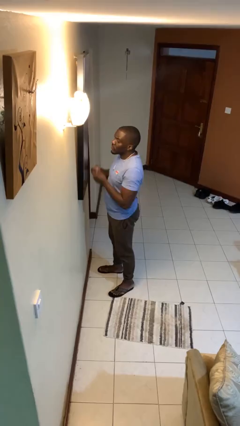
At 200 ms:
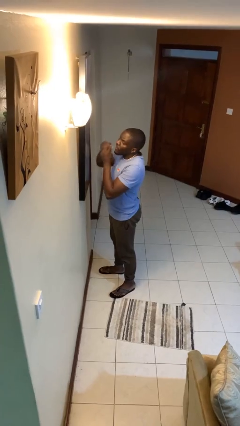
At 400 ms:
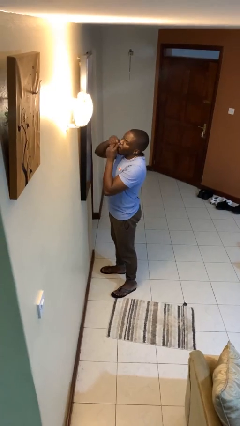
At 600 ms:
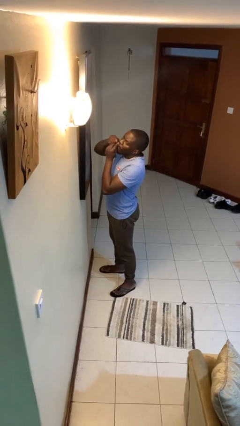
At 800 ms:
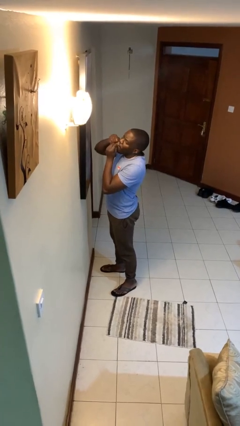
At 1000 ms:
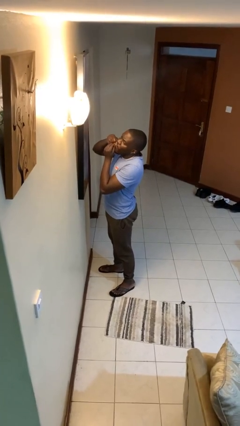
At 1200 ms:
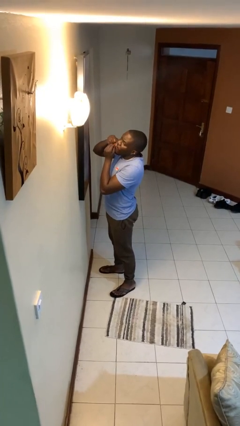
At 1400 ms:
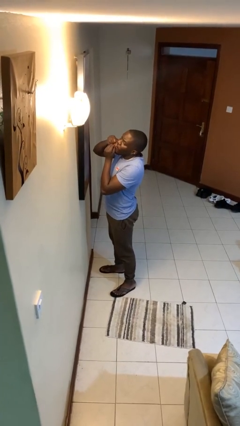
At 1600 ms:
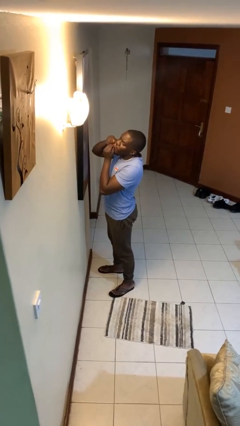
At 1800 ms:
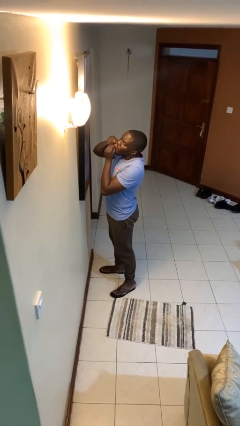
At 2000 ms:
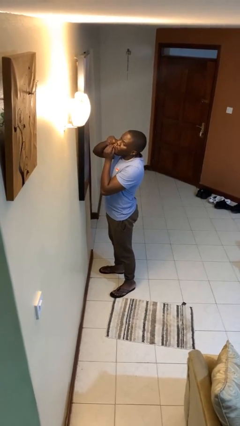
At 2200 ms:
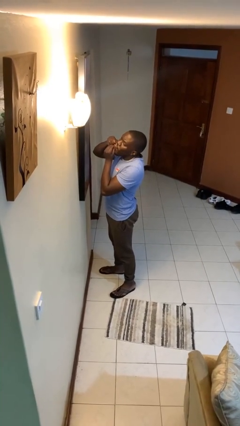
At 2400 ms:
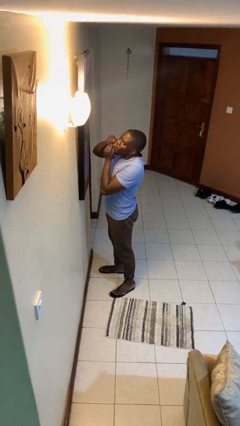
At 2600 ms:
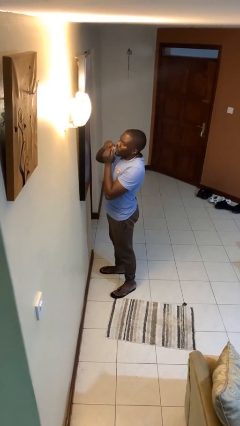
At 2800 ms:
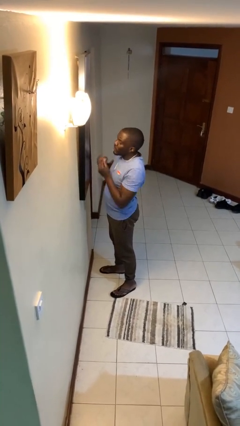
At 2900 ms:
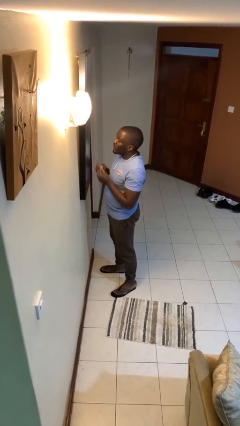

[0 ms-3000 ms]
person flosses

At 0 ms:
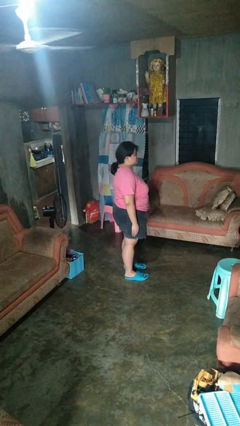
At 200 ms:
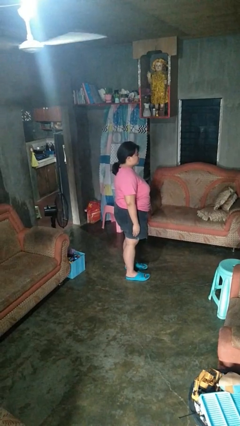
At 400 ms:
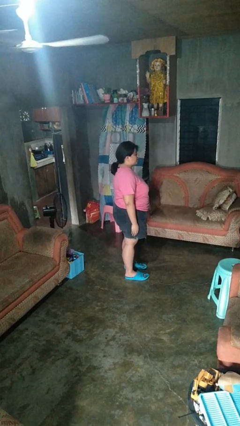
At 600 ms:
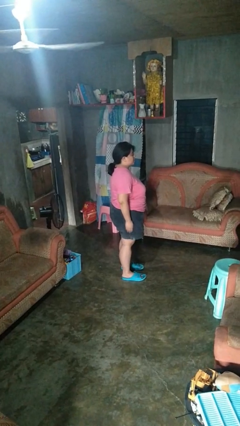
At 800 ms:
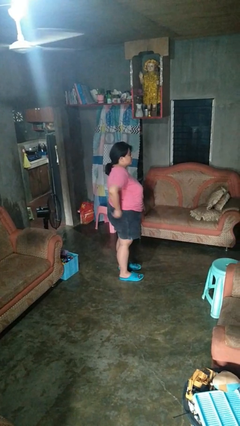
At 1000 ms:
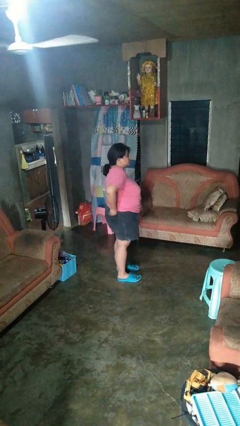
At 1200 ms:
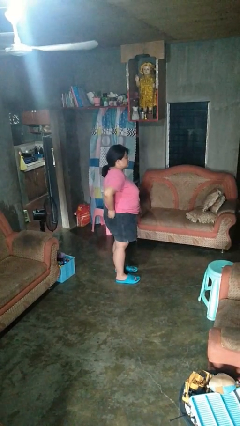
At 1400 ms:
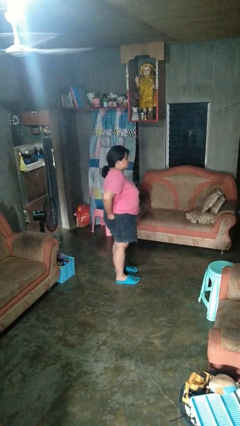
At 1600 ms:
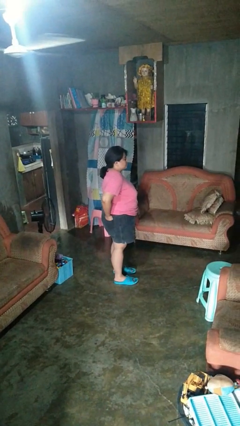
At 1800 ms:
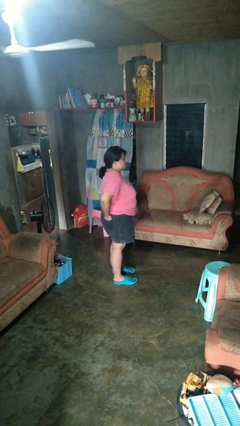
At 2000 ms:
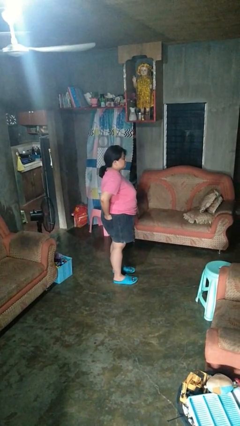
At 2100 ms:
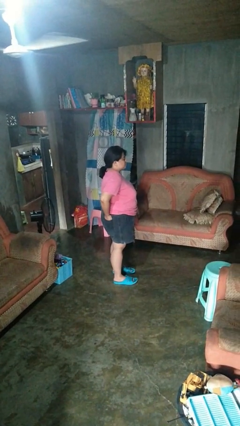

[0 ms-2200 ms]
person puts hands in back pockets

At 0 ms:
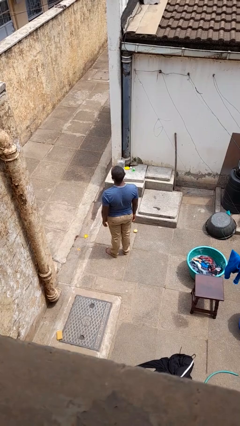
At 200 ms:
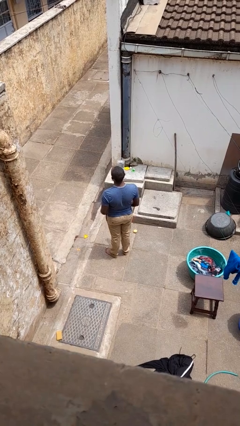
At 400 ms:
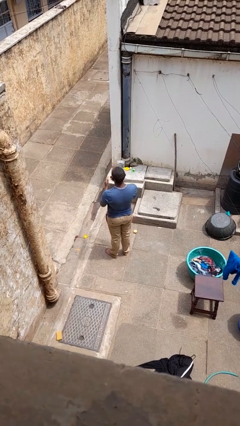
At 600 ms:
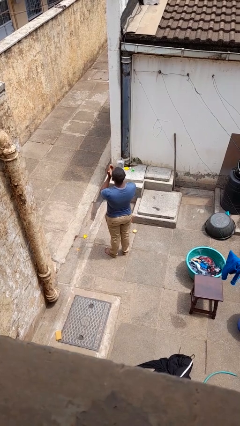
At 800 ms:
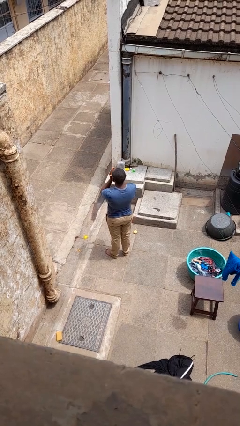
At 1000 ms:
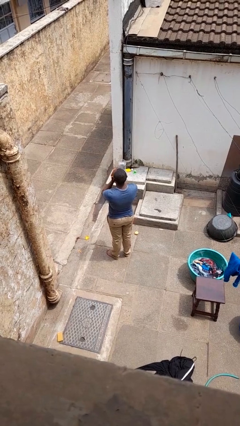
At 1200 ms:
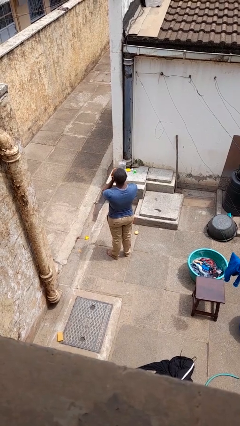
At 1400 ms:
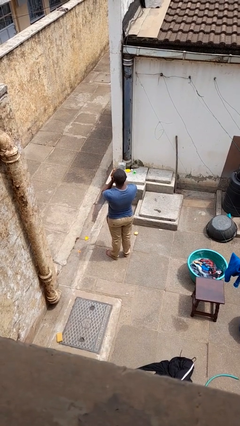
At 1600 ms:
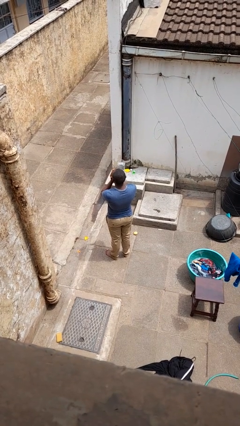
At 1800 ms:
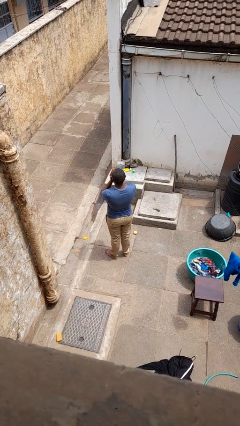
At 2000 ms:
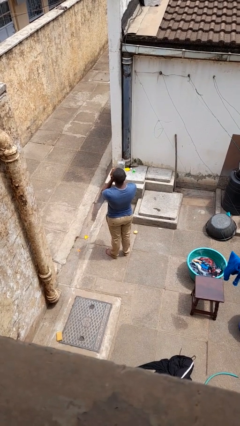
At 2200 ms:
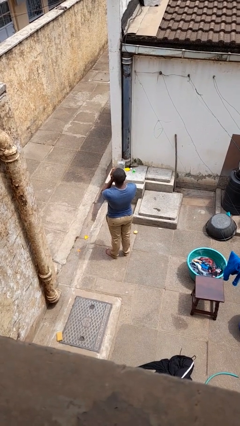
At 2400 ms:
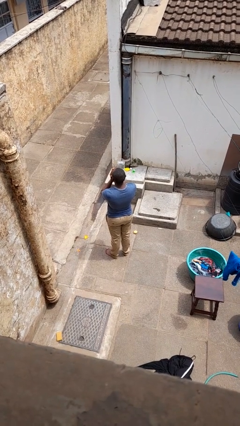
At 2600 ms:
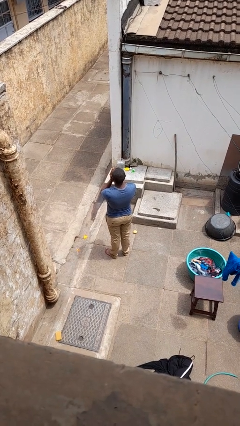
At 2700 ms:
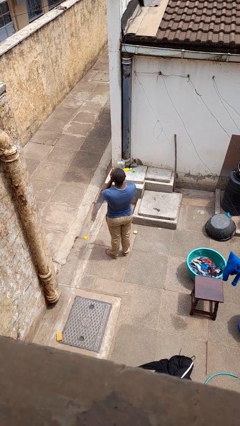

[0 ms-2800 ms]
person blows into hands

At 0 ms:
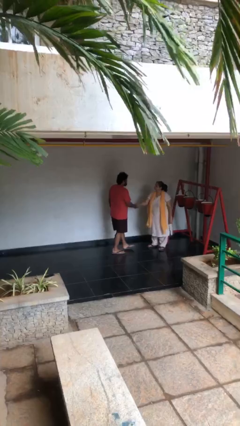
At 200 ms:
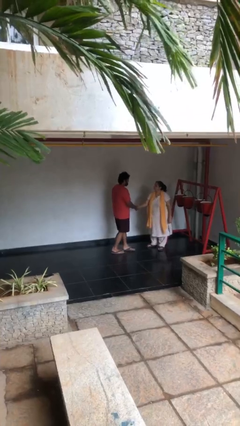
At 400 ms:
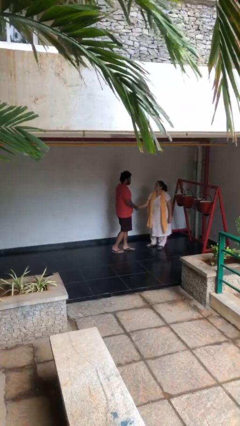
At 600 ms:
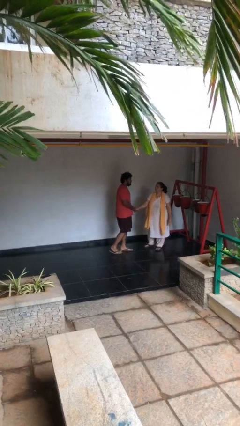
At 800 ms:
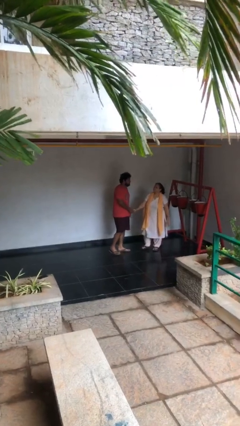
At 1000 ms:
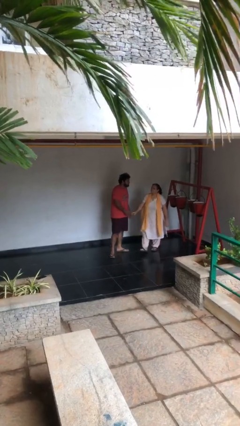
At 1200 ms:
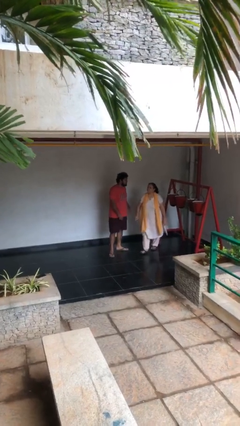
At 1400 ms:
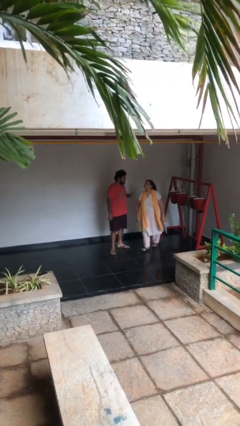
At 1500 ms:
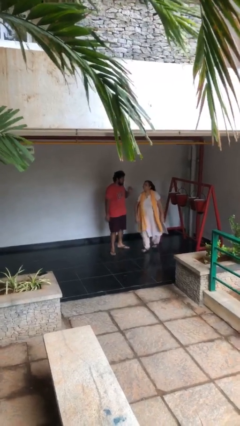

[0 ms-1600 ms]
person shakes hand

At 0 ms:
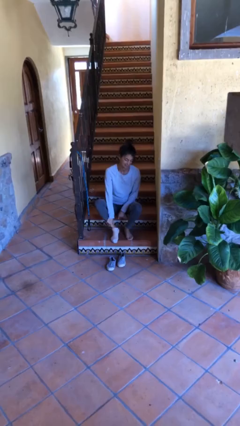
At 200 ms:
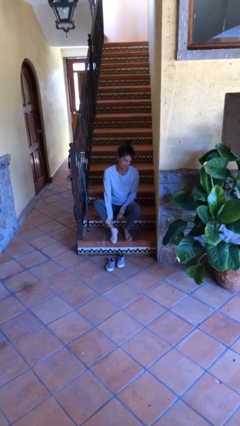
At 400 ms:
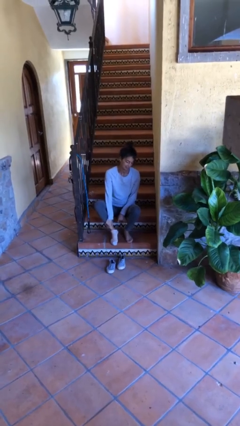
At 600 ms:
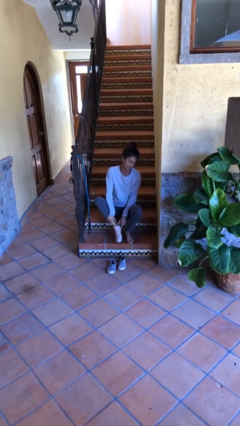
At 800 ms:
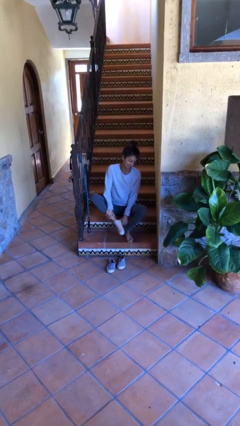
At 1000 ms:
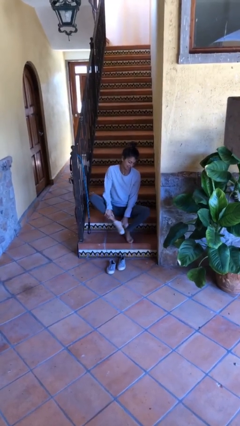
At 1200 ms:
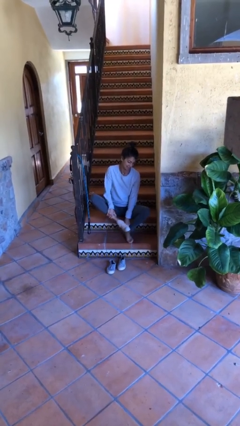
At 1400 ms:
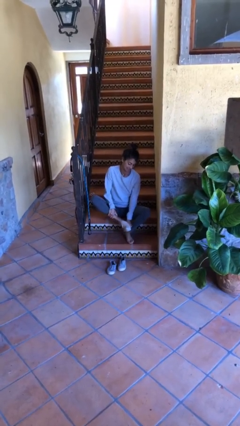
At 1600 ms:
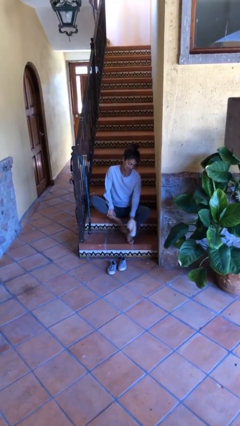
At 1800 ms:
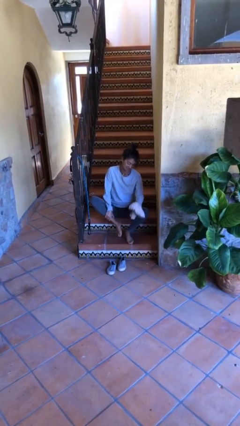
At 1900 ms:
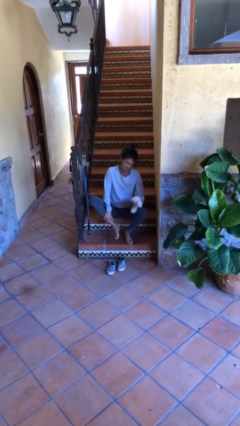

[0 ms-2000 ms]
person takes off socks

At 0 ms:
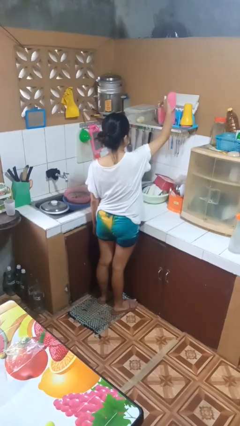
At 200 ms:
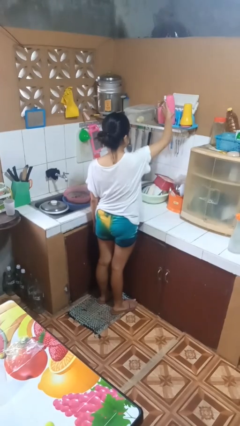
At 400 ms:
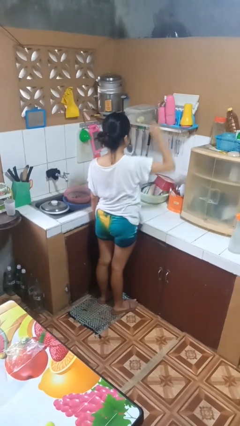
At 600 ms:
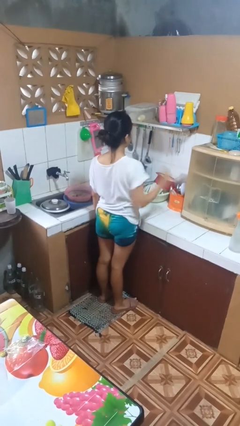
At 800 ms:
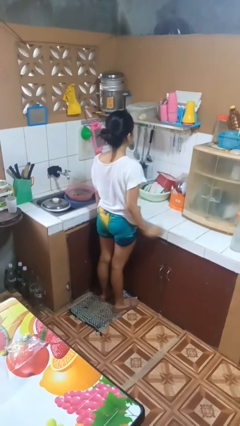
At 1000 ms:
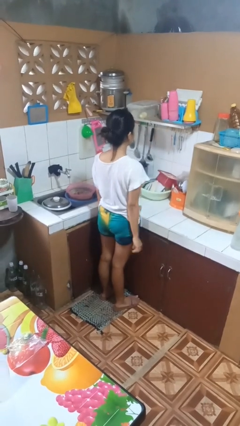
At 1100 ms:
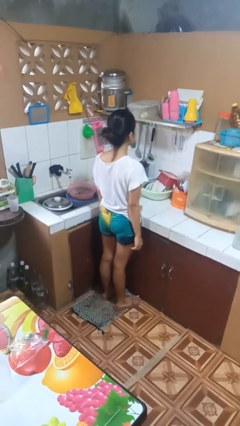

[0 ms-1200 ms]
person puts down object on shelf

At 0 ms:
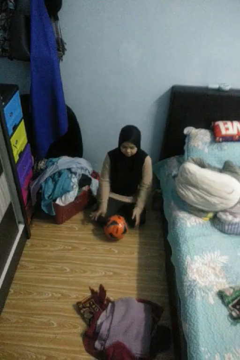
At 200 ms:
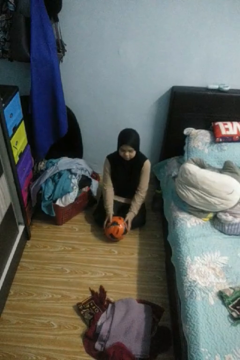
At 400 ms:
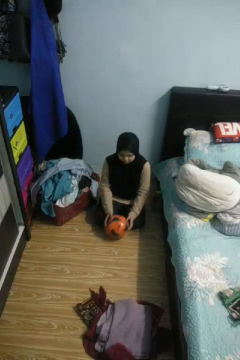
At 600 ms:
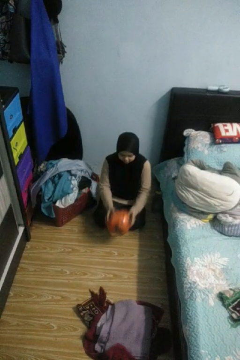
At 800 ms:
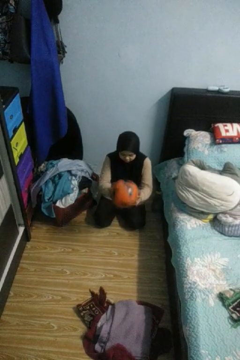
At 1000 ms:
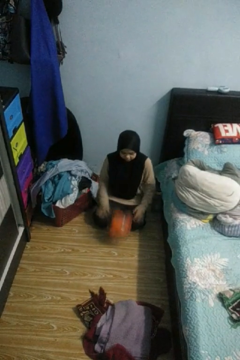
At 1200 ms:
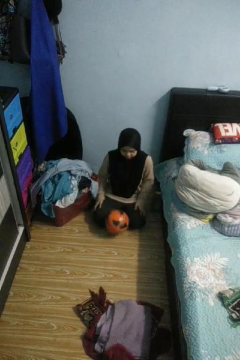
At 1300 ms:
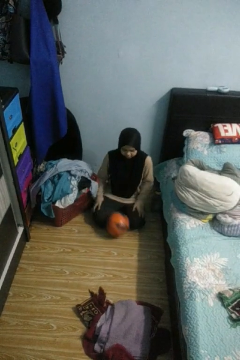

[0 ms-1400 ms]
person bounces ball on floor

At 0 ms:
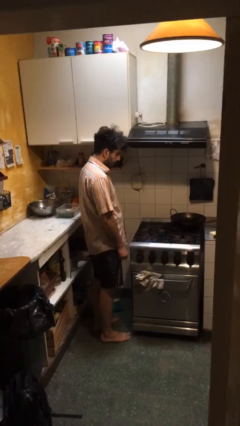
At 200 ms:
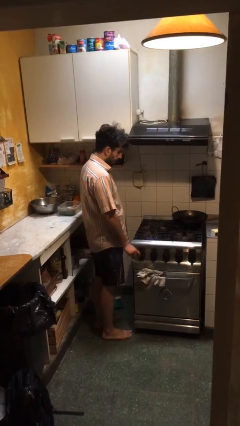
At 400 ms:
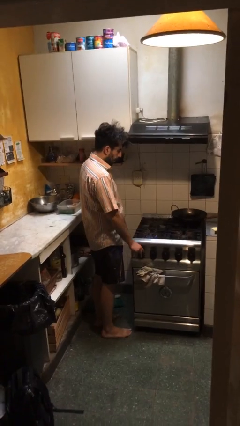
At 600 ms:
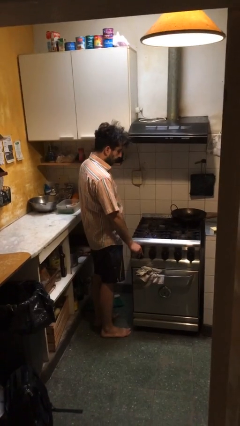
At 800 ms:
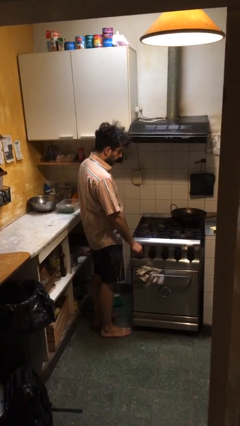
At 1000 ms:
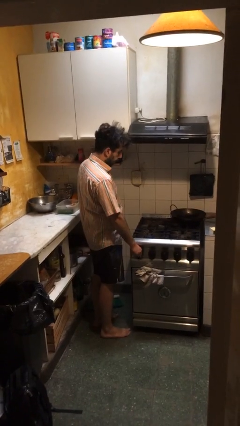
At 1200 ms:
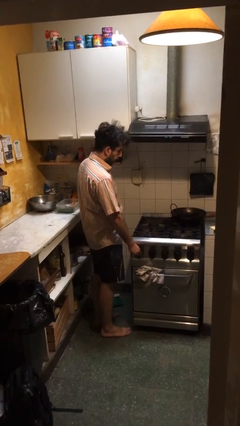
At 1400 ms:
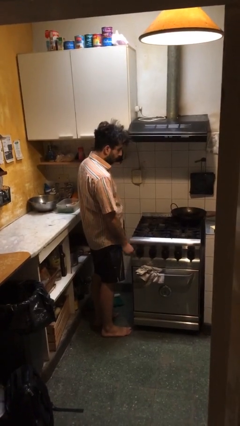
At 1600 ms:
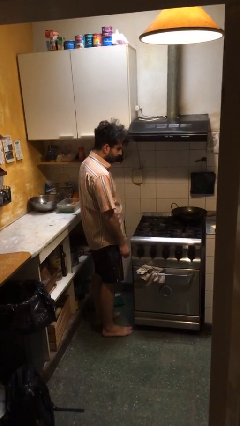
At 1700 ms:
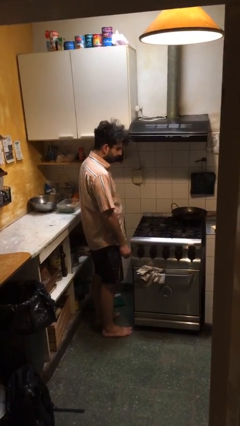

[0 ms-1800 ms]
person turns off stovetop

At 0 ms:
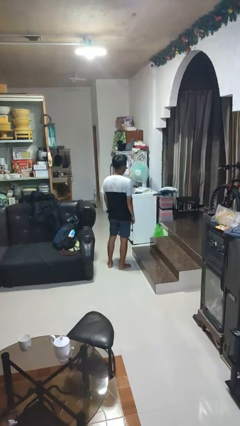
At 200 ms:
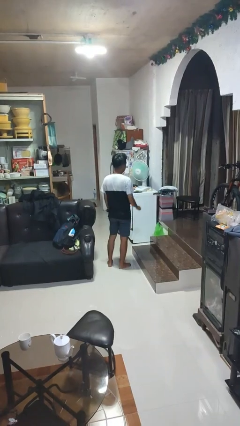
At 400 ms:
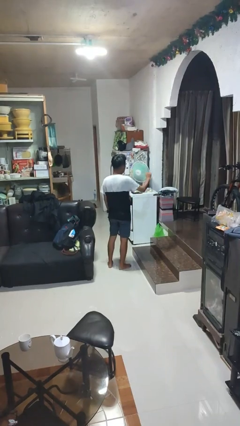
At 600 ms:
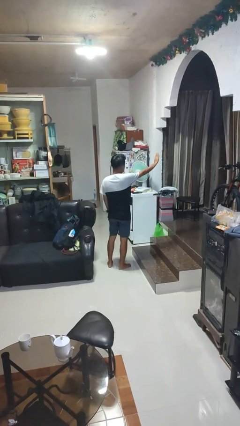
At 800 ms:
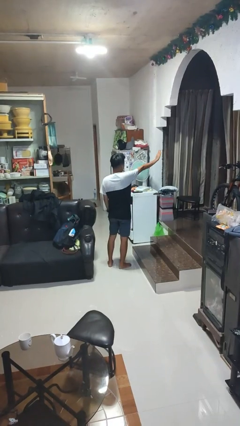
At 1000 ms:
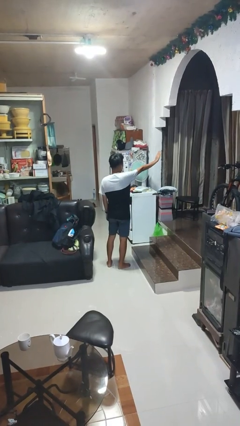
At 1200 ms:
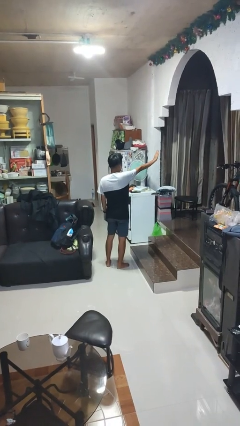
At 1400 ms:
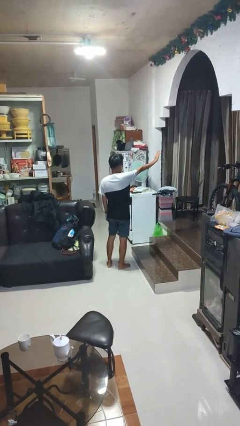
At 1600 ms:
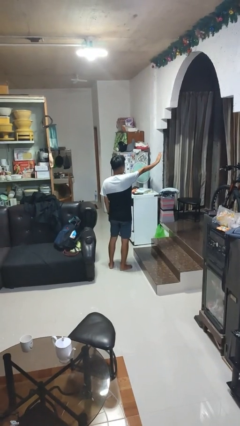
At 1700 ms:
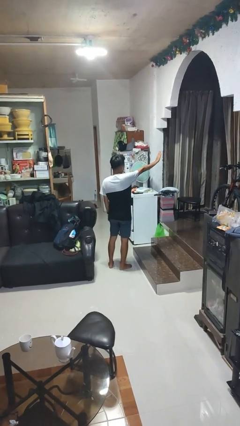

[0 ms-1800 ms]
person gestures stop
